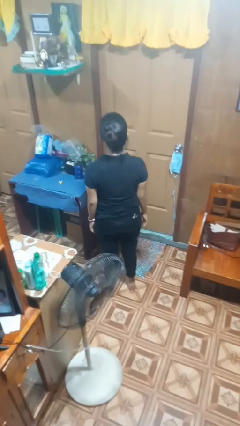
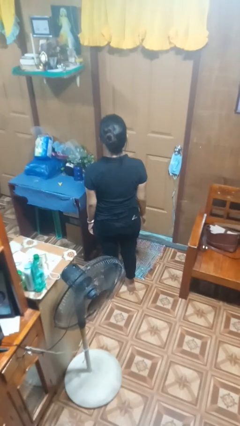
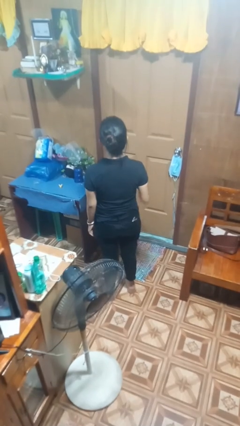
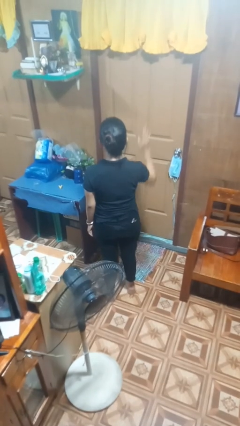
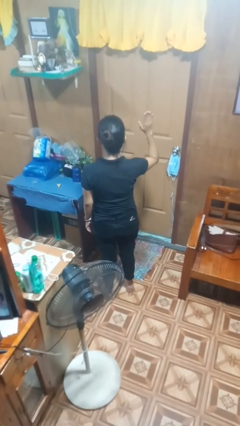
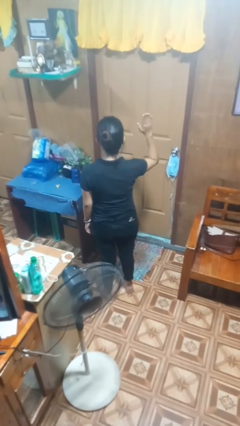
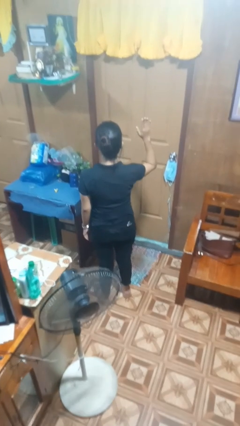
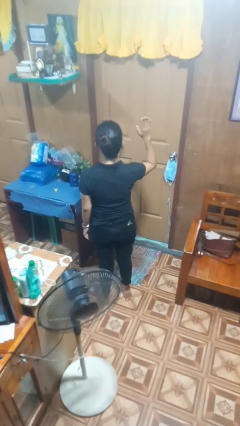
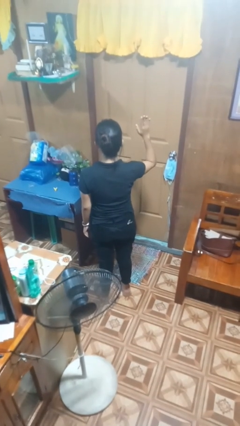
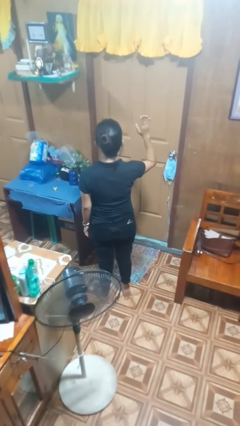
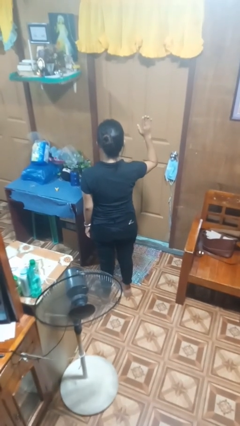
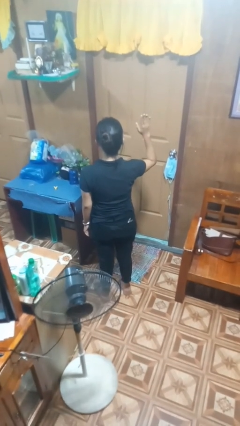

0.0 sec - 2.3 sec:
person gestures raise hand

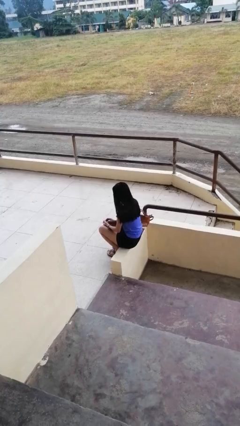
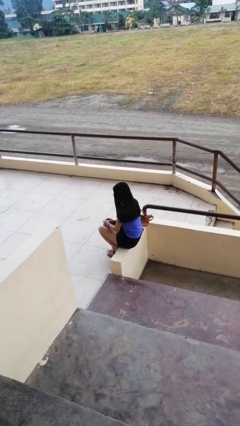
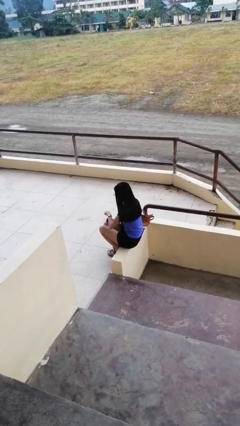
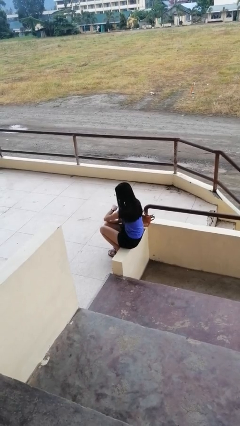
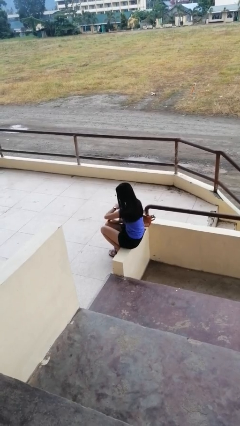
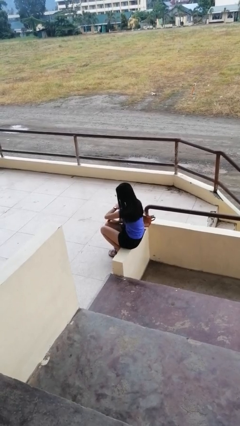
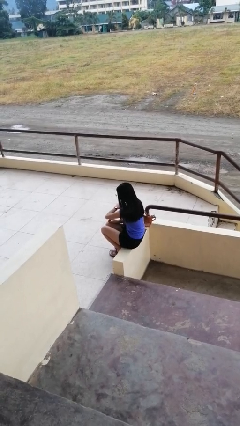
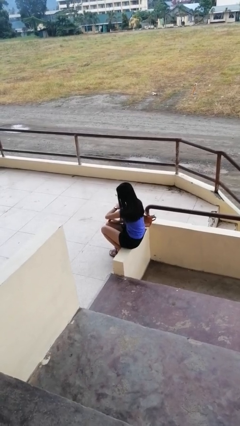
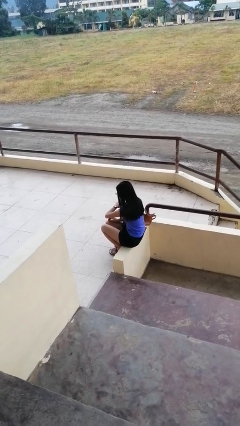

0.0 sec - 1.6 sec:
person looks at wristwatch

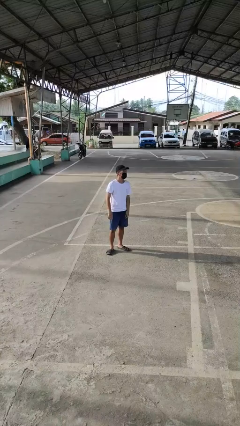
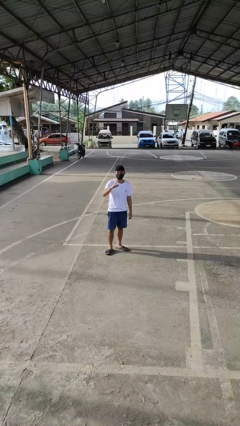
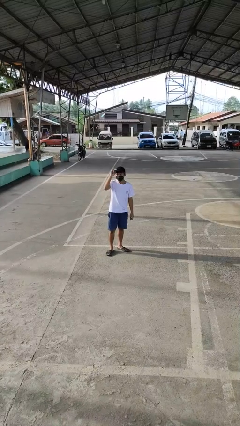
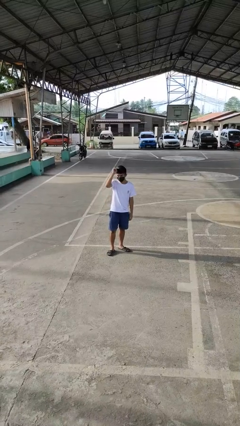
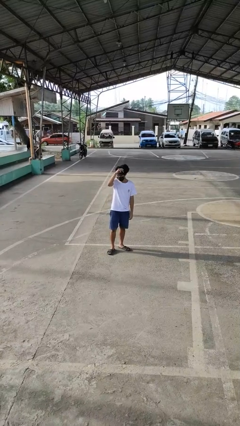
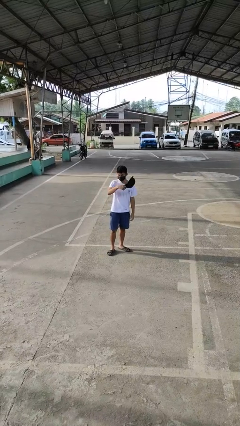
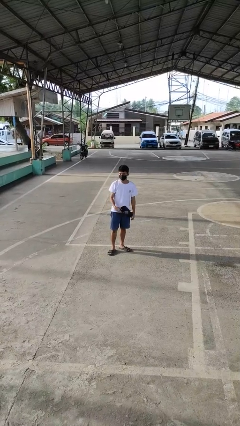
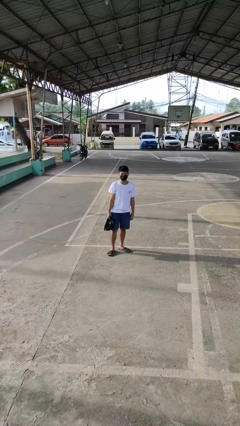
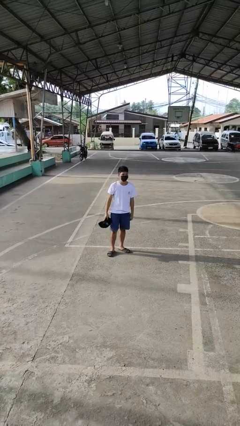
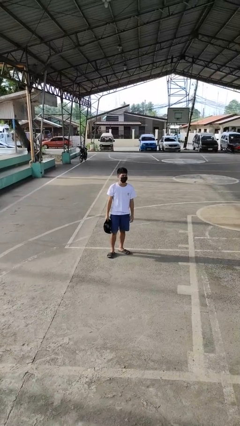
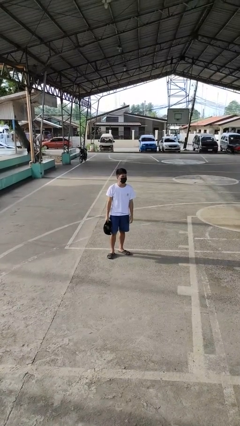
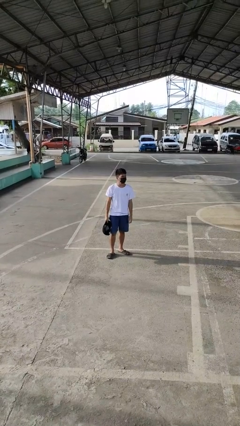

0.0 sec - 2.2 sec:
person takes off hat

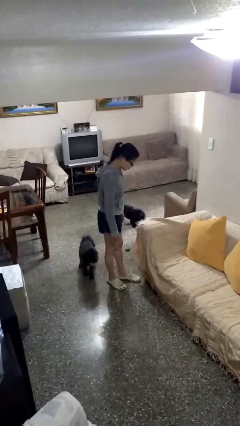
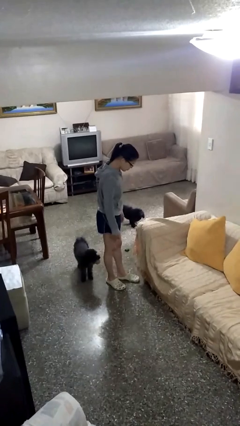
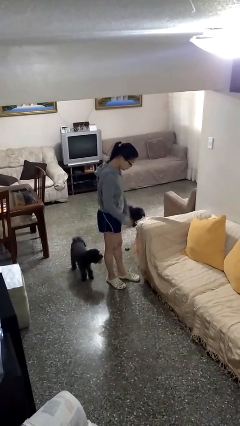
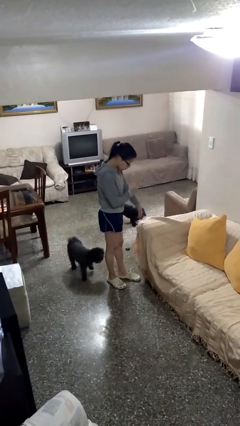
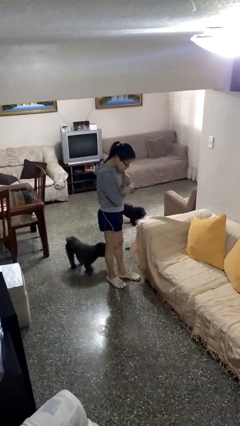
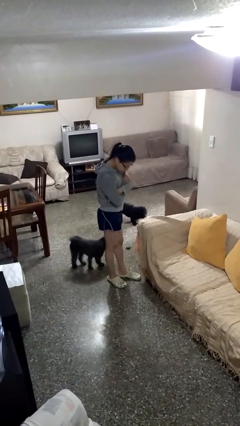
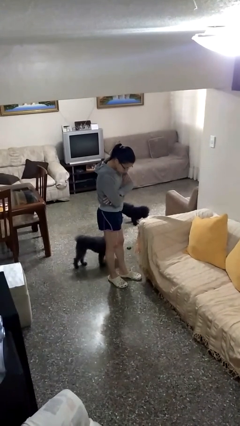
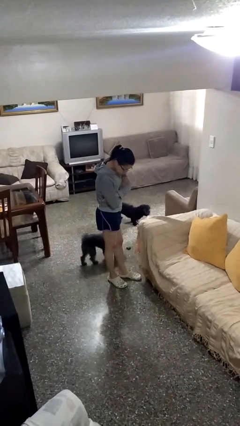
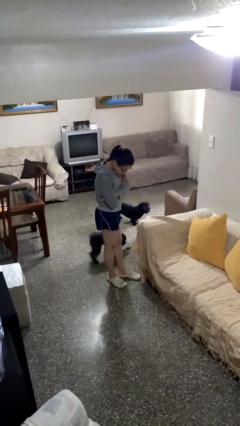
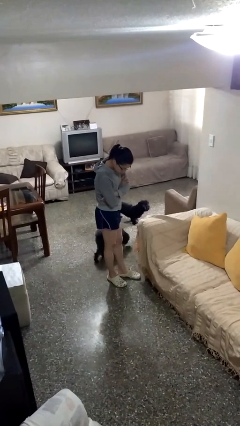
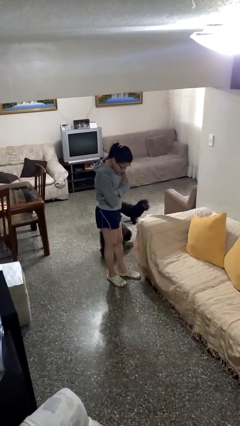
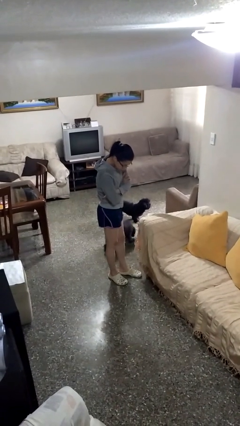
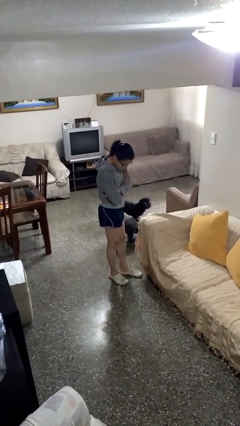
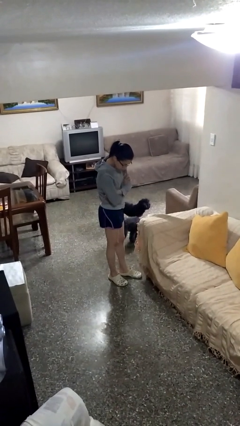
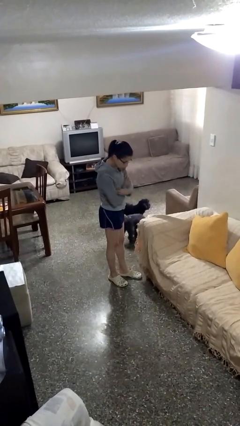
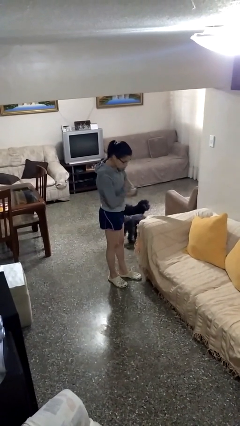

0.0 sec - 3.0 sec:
person crosses arms

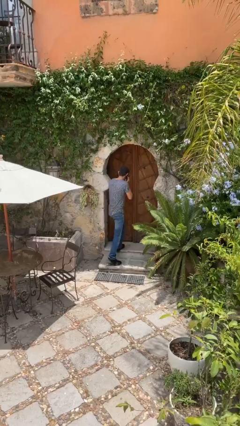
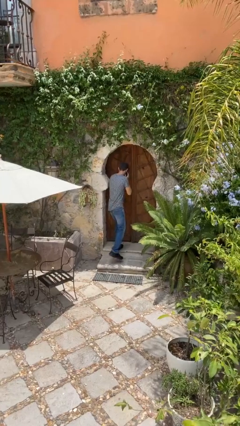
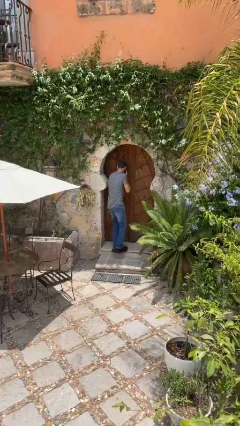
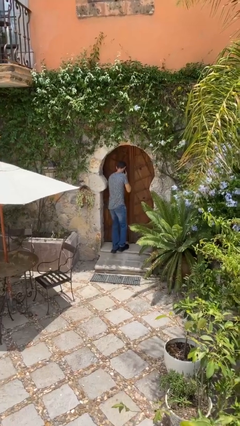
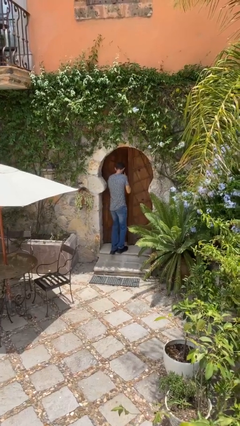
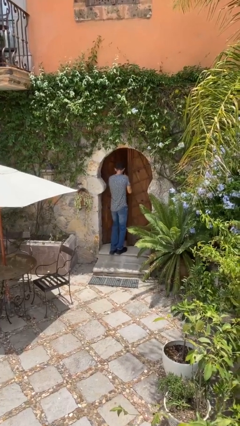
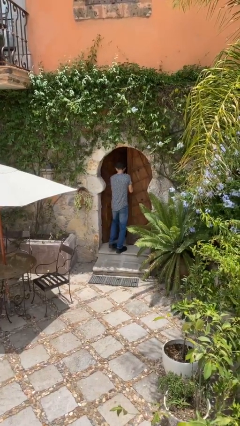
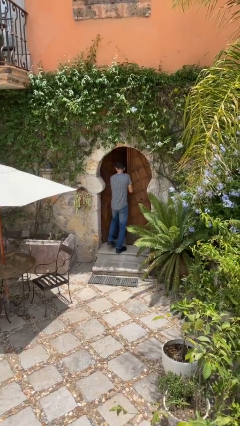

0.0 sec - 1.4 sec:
person opens facility door

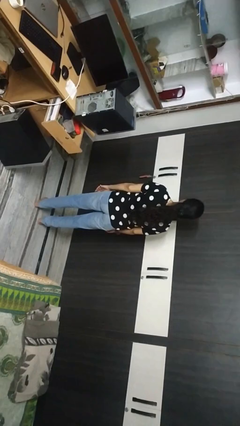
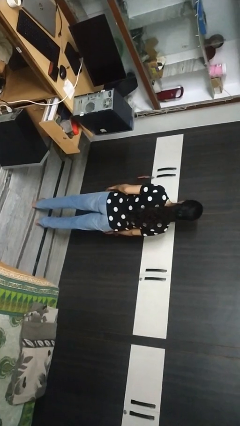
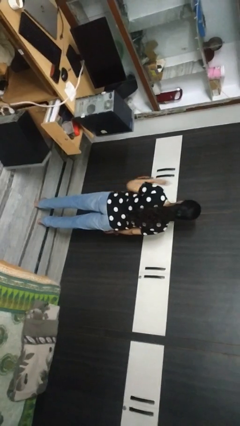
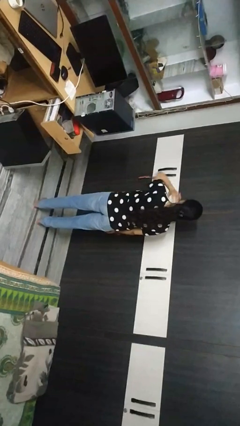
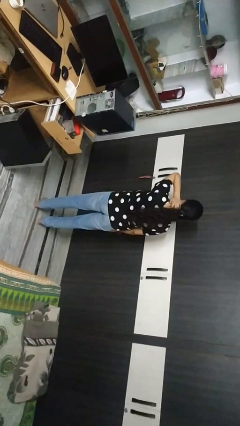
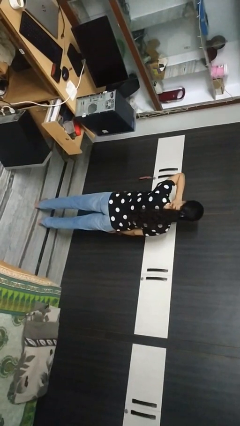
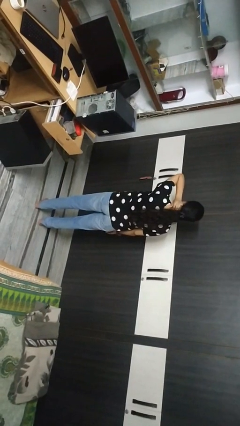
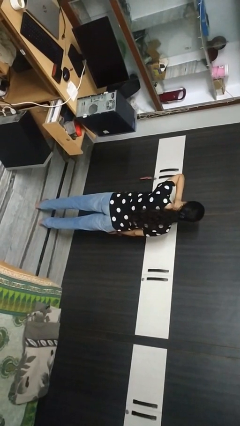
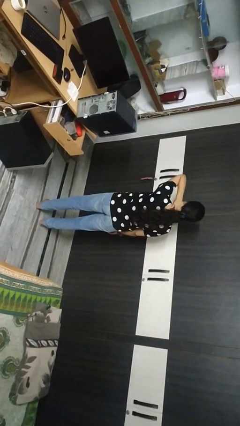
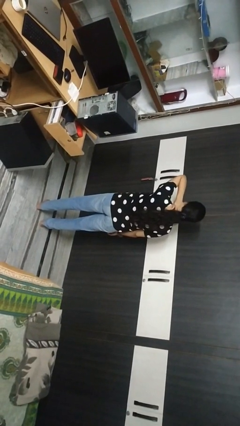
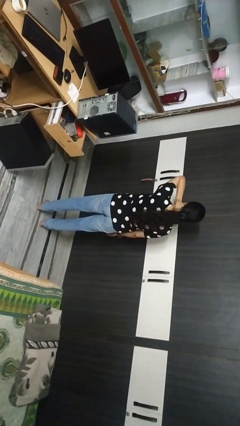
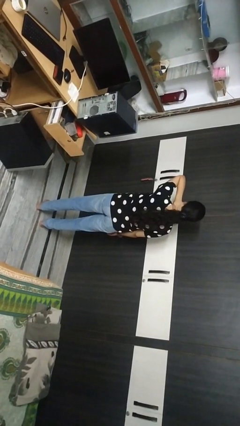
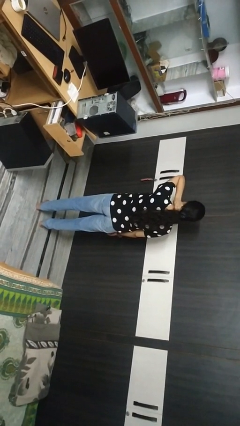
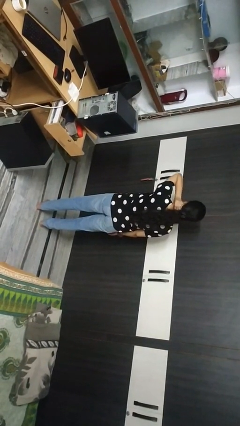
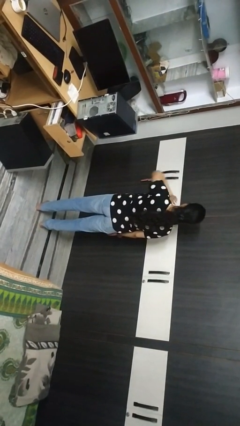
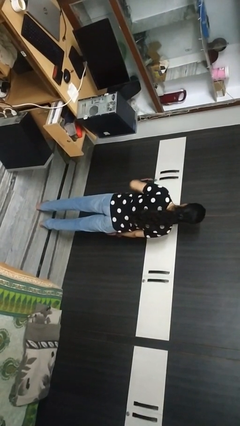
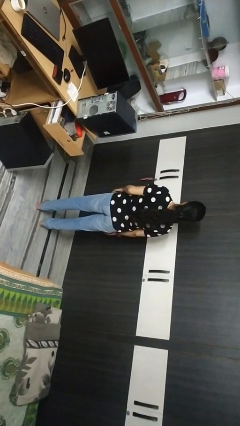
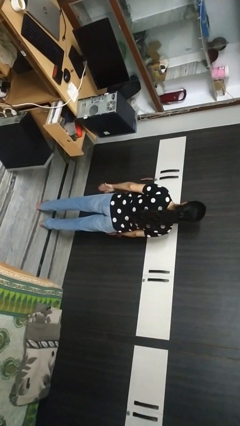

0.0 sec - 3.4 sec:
person rubs neck

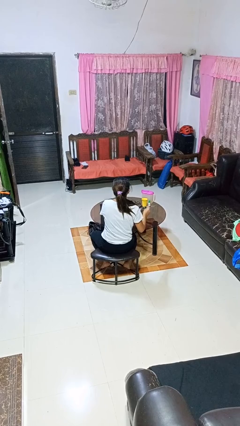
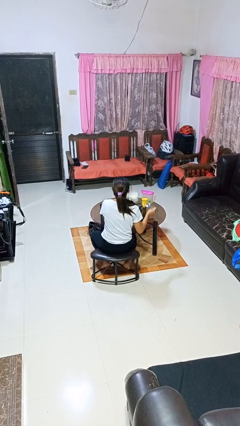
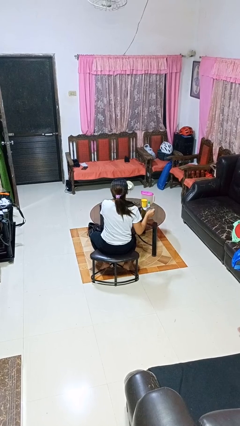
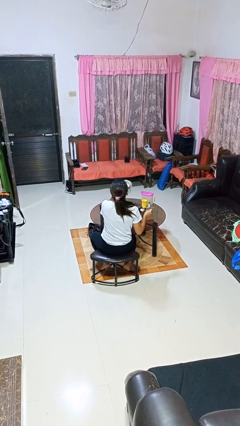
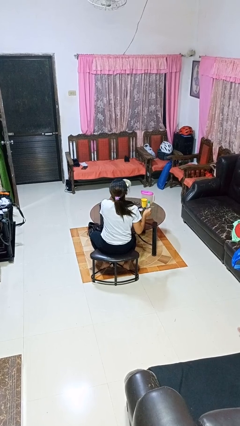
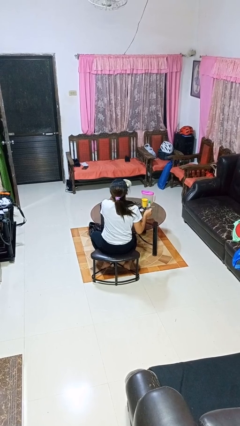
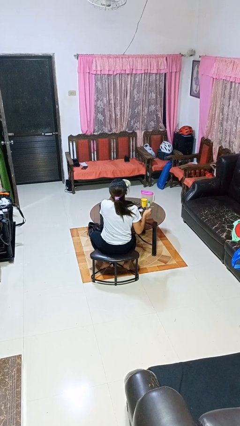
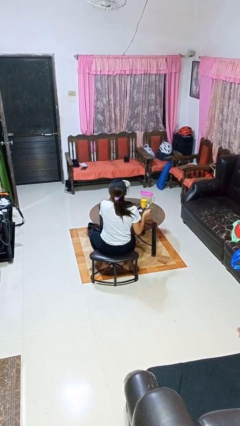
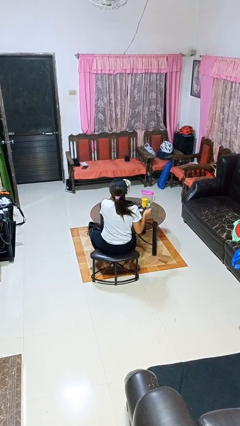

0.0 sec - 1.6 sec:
person drinks from mug

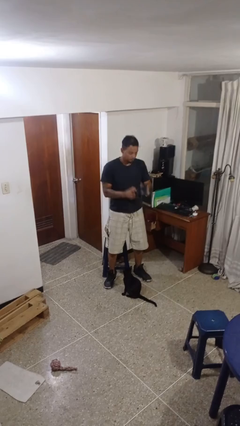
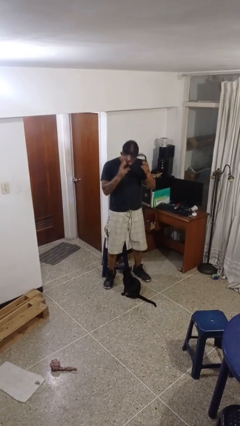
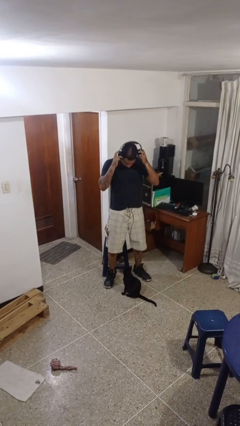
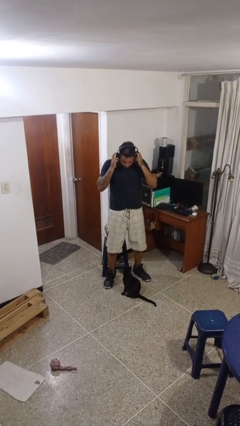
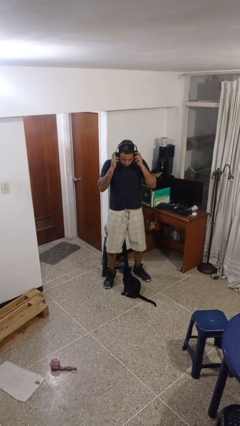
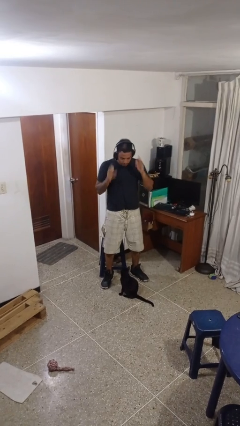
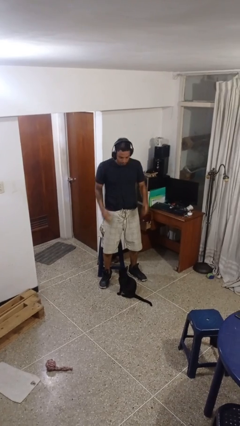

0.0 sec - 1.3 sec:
person puts on headphones

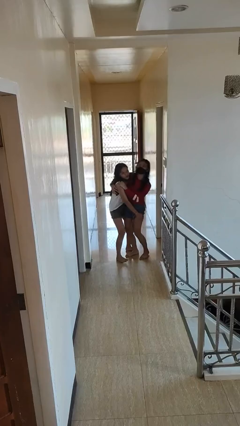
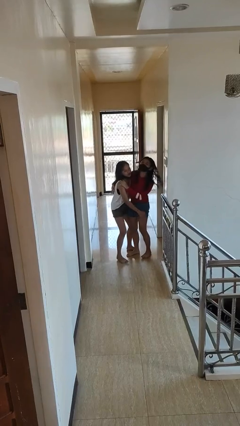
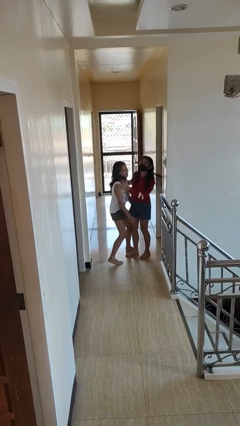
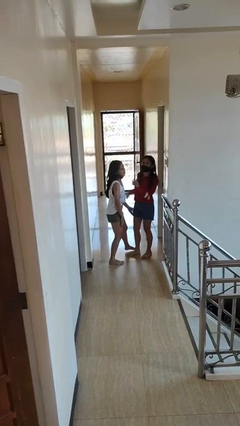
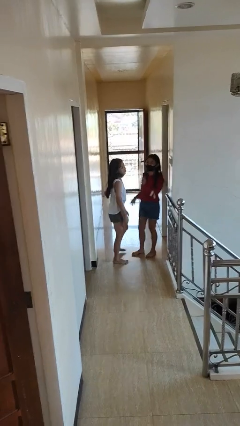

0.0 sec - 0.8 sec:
person puts down person
